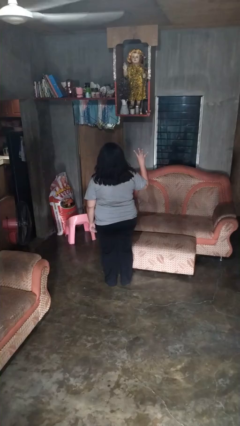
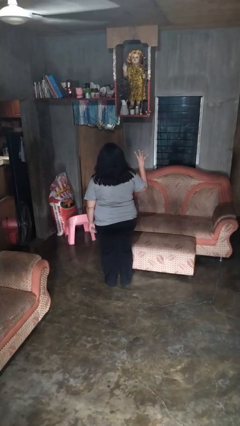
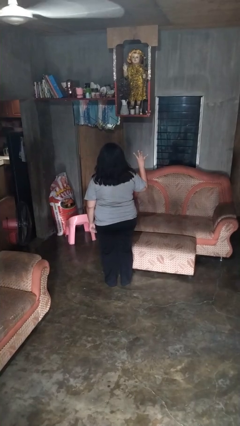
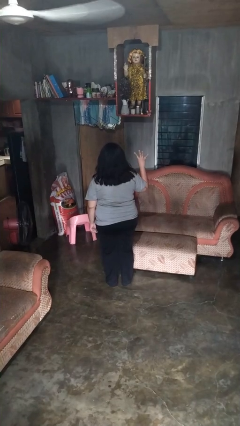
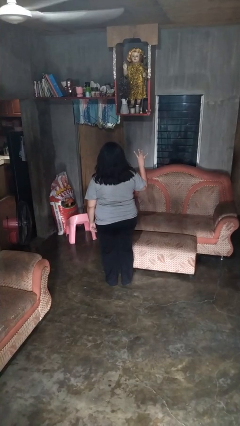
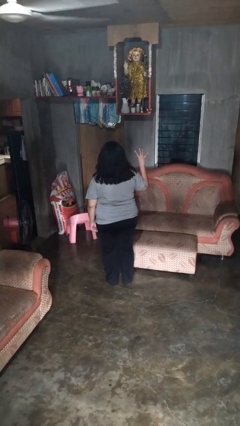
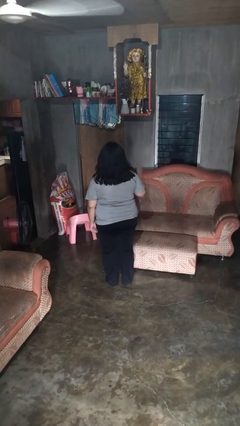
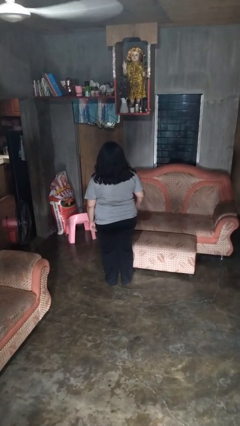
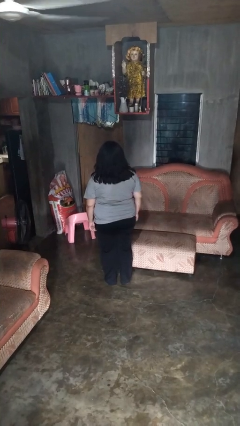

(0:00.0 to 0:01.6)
person gestures number four

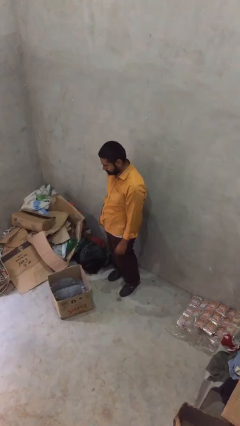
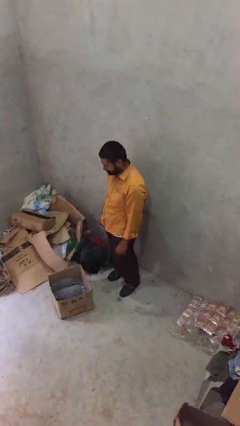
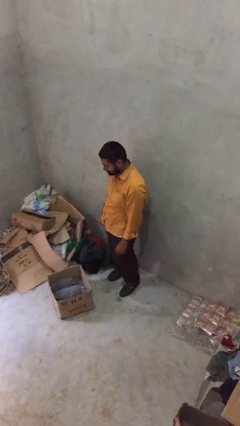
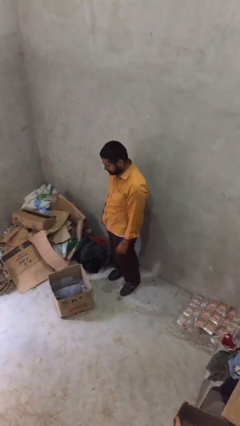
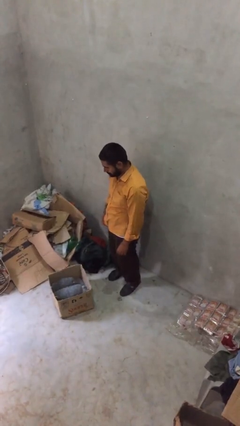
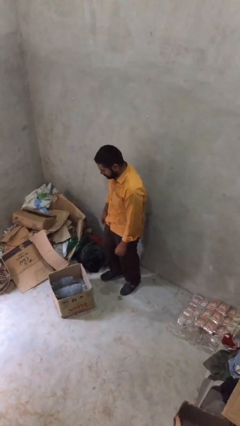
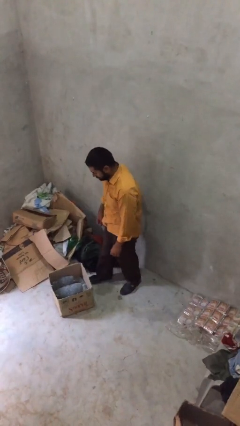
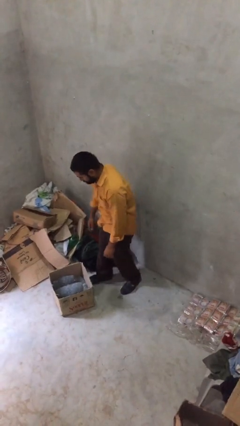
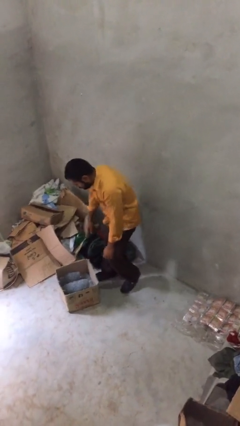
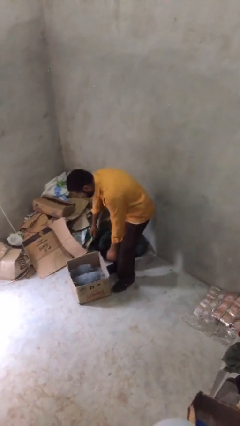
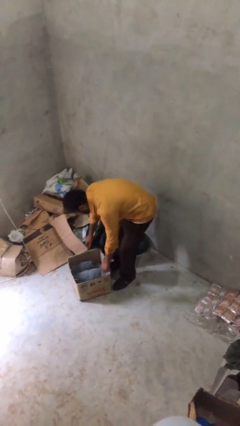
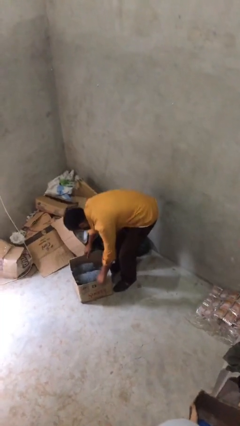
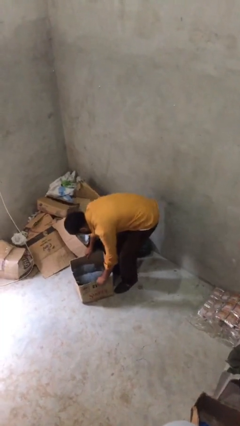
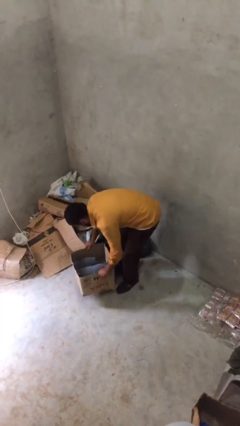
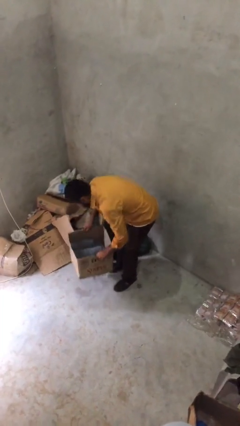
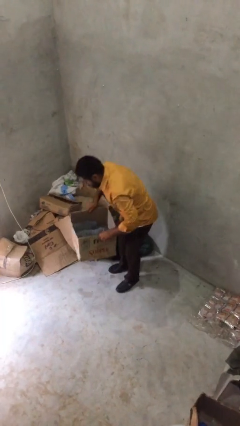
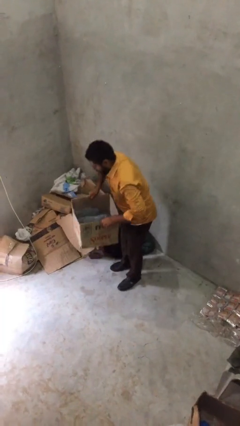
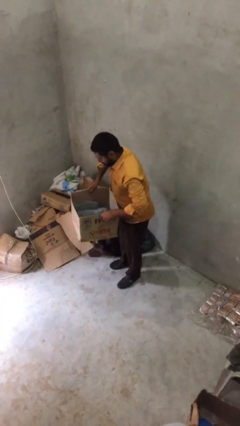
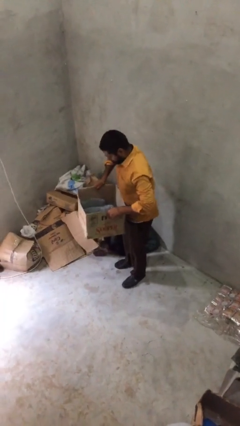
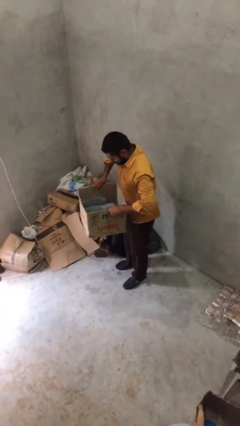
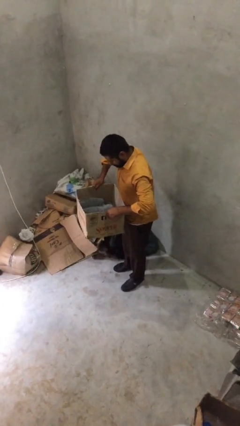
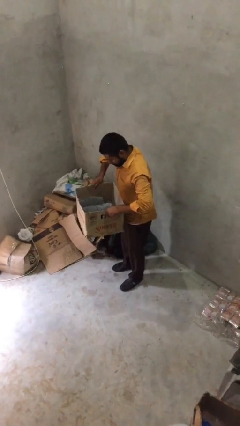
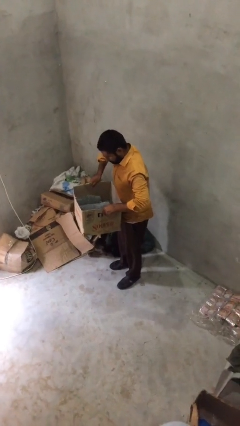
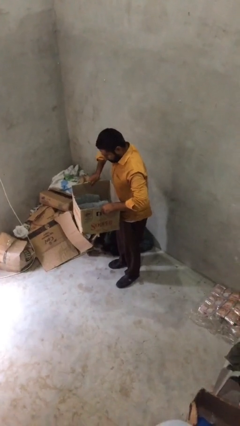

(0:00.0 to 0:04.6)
person picks up object from floor

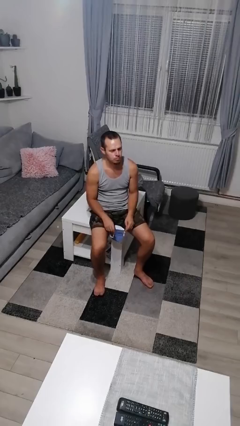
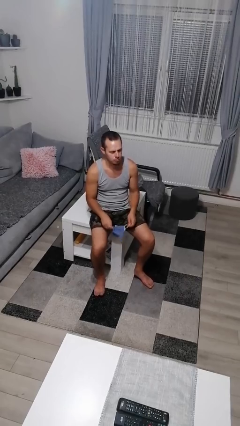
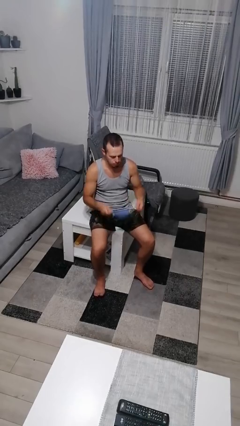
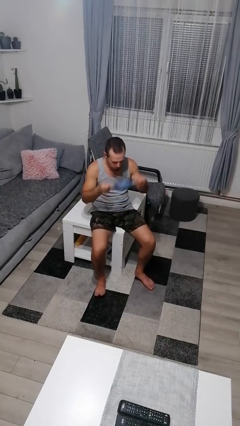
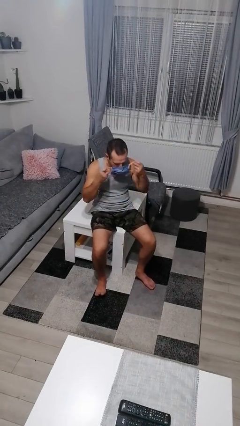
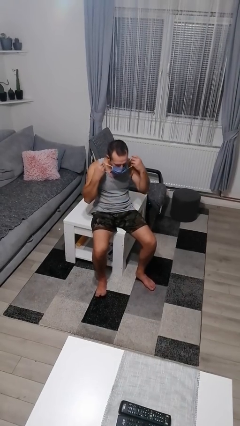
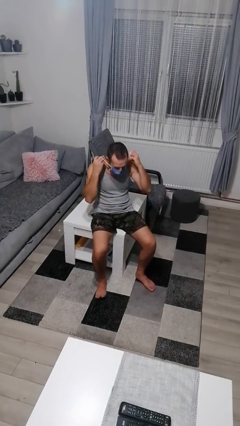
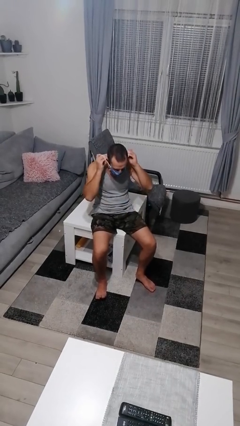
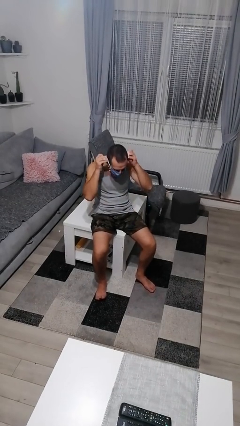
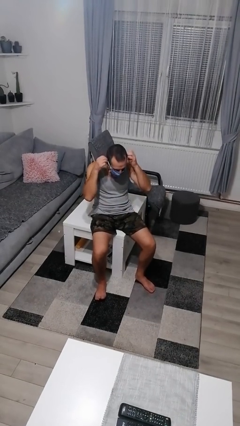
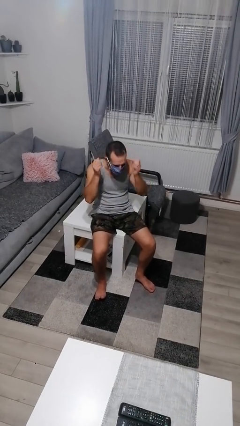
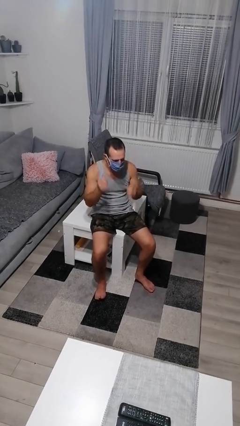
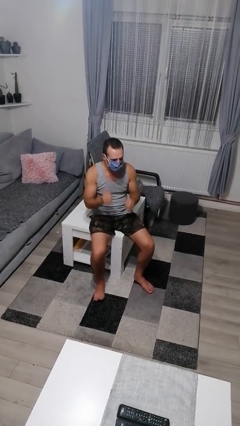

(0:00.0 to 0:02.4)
person puts on facemask

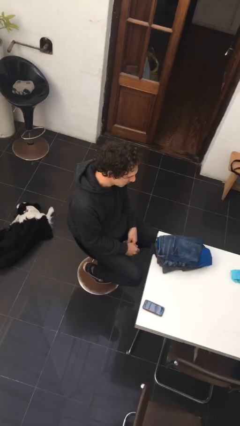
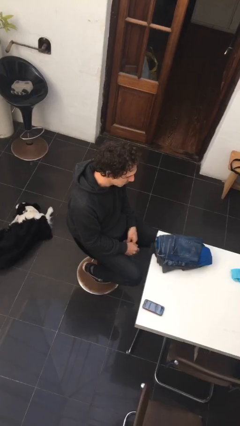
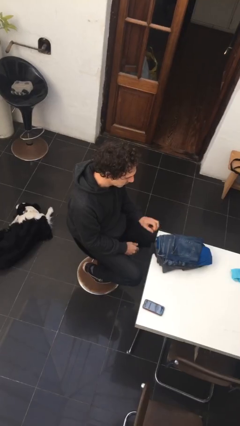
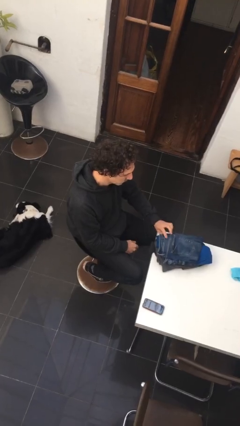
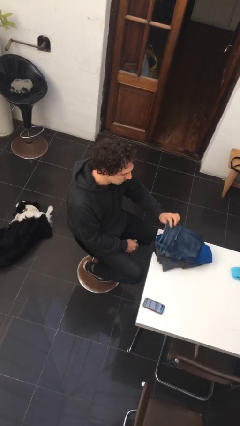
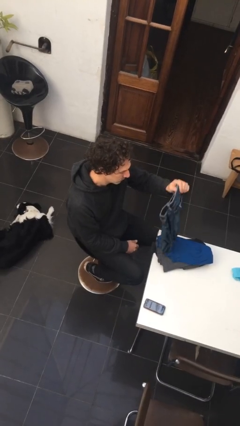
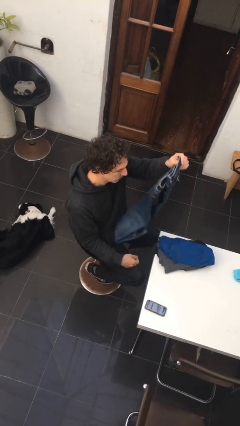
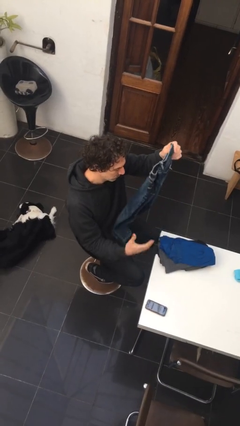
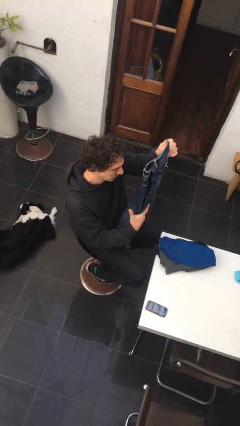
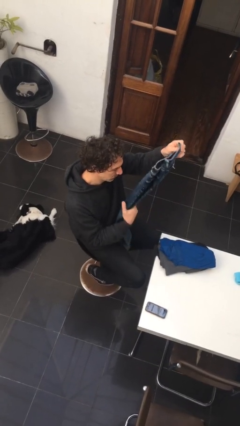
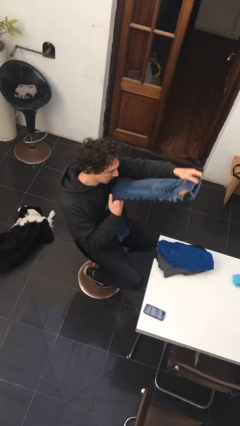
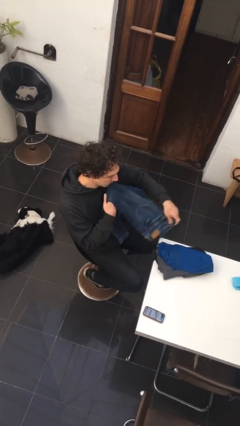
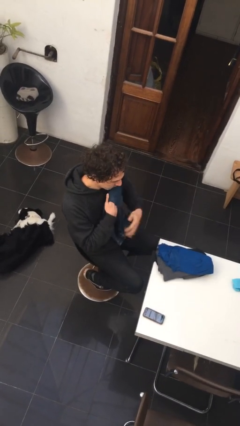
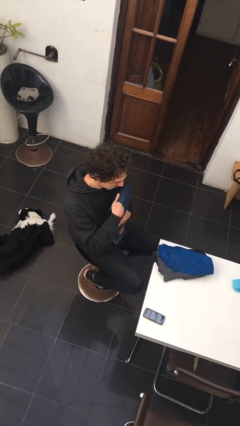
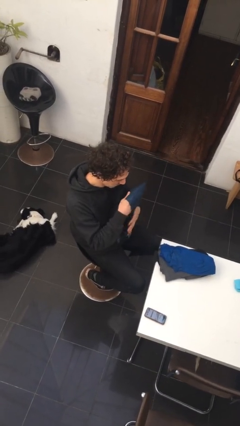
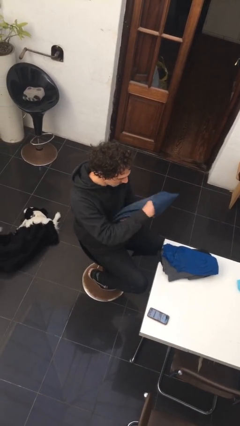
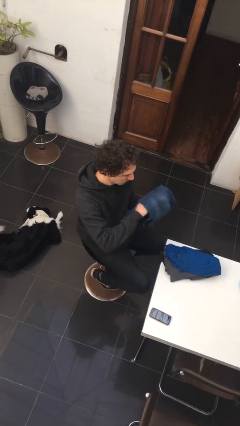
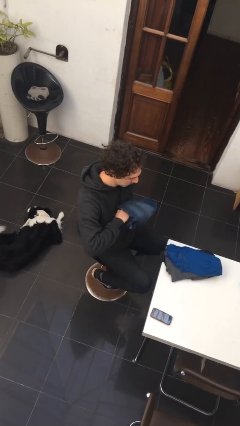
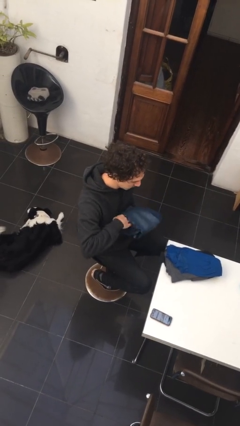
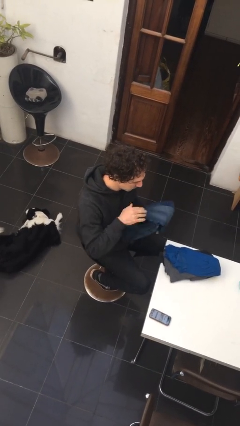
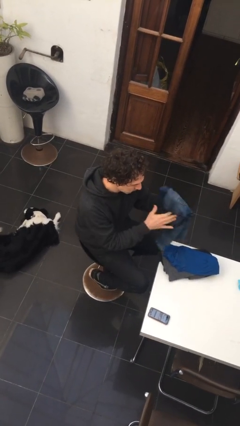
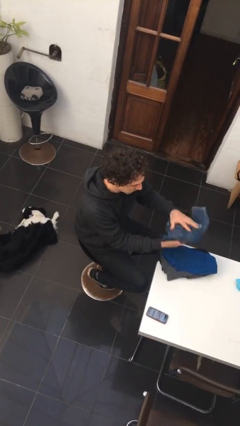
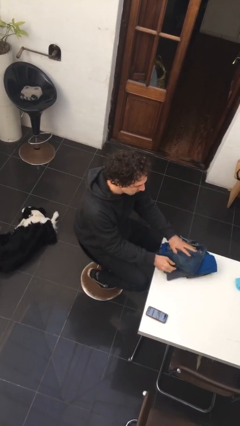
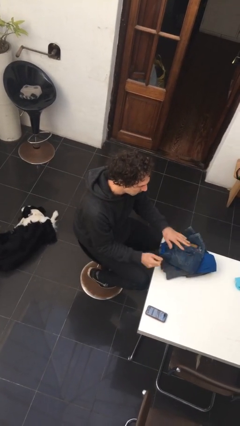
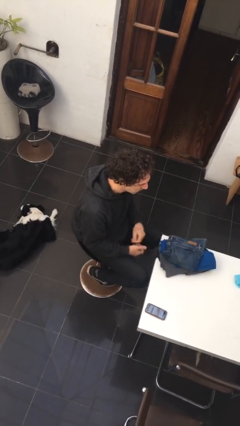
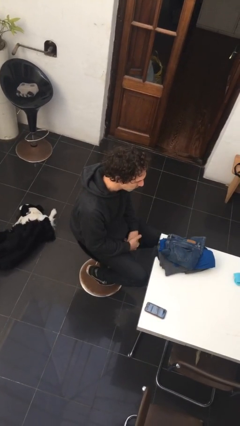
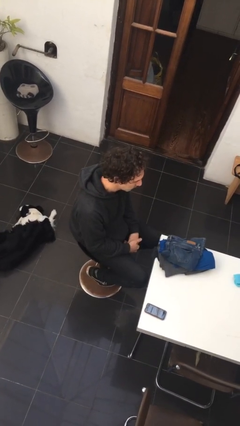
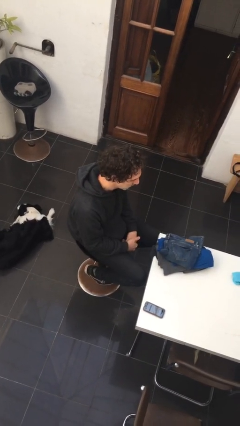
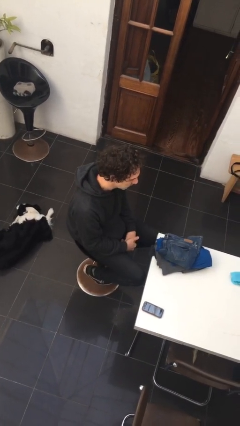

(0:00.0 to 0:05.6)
person folds pants

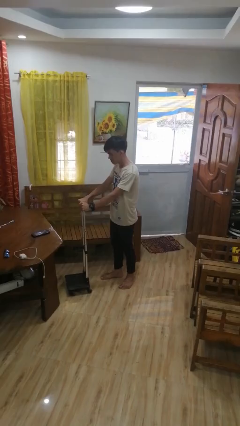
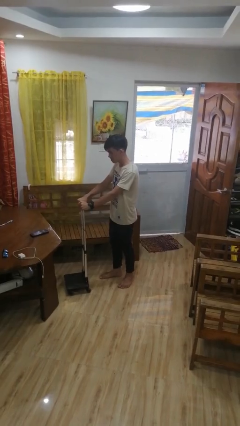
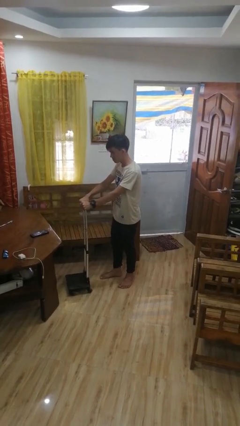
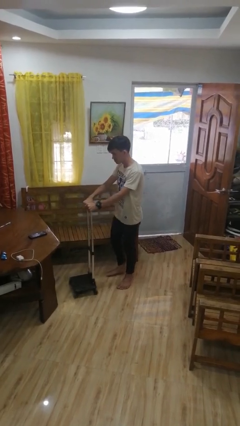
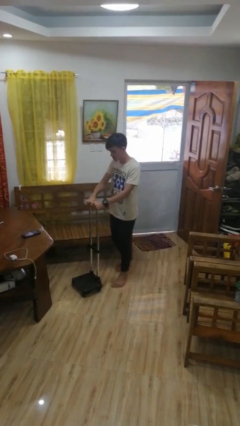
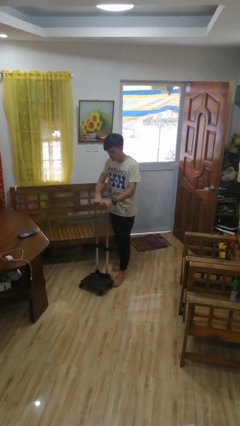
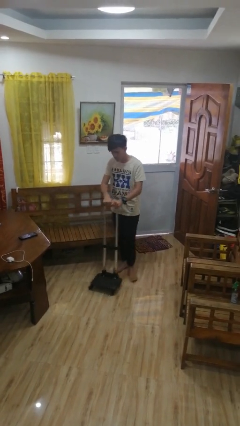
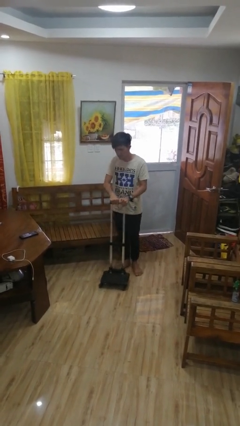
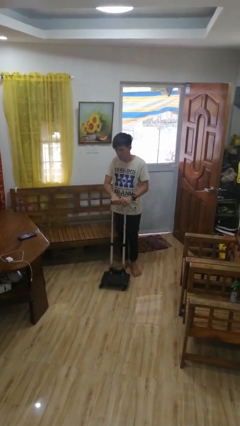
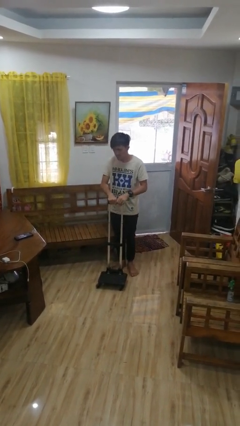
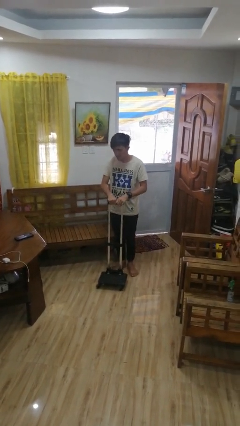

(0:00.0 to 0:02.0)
person pulls wheeled cart

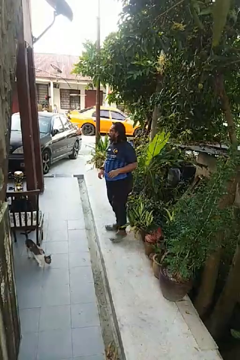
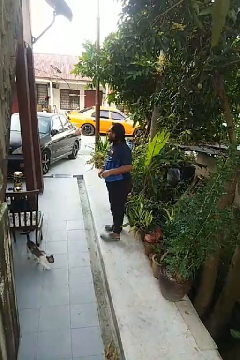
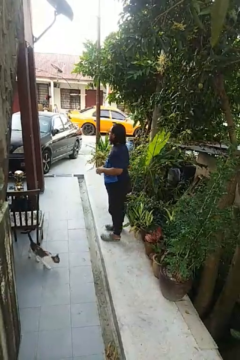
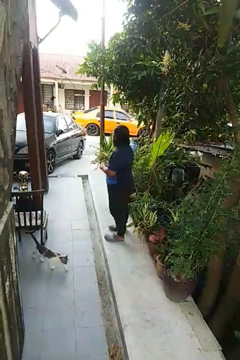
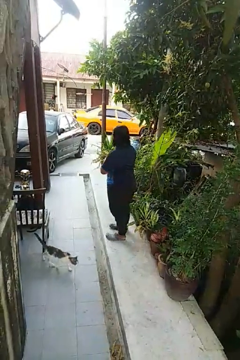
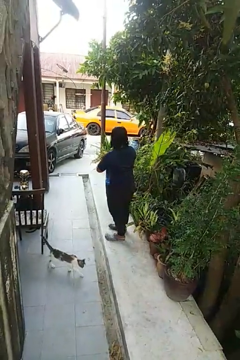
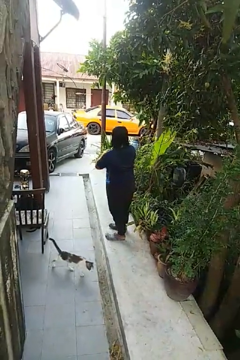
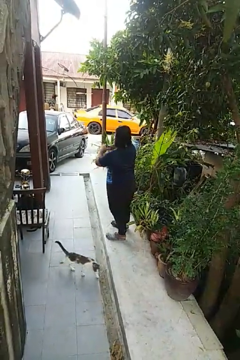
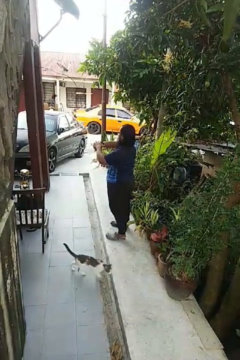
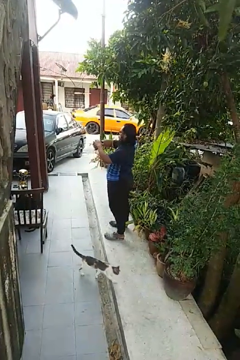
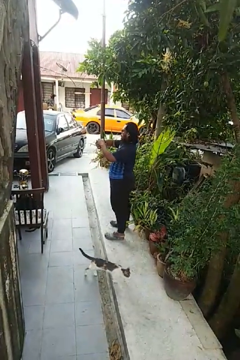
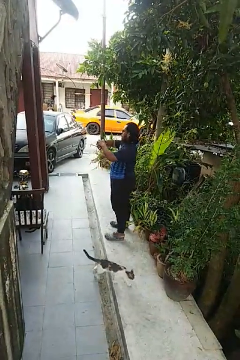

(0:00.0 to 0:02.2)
person looks at wristwatch
